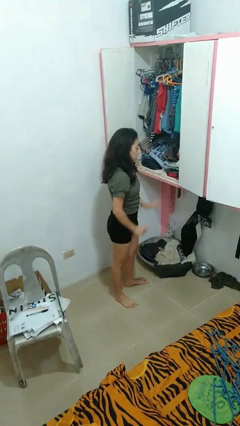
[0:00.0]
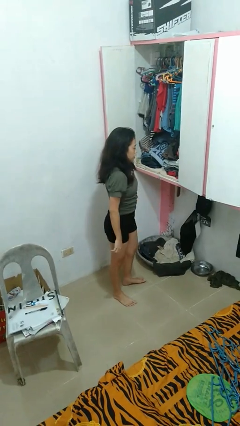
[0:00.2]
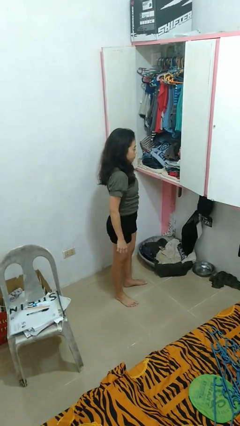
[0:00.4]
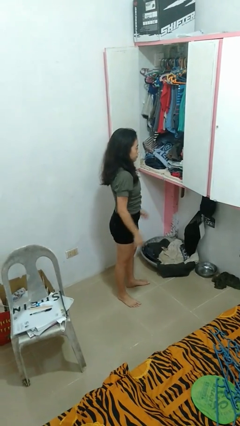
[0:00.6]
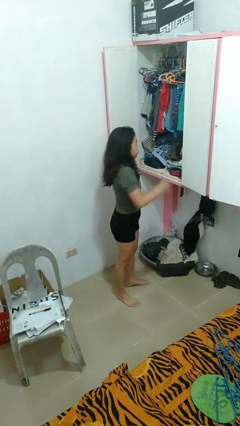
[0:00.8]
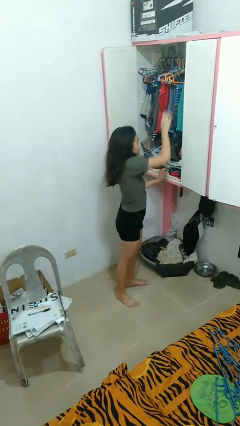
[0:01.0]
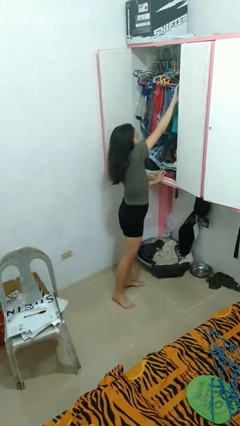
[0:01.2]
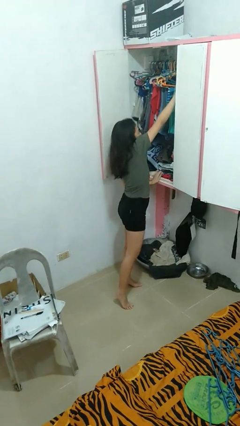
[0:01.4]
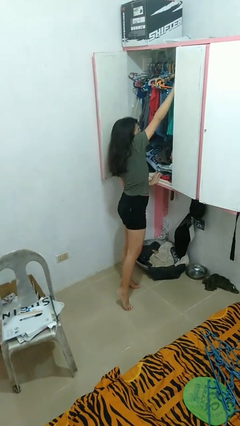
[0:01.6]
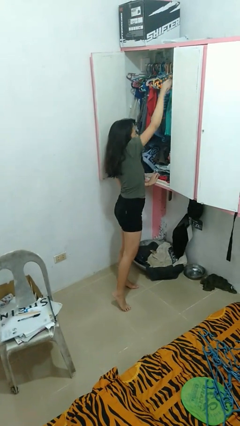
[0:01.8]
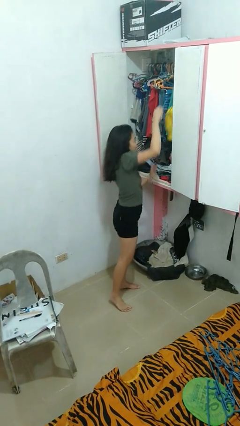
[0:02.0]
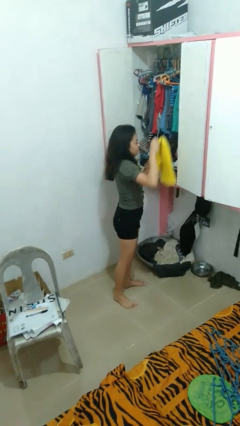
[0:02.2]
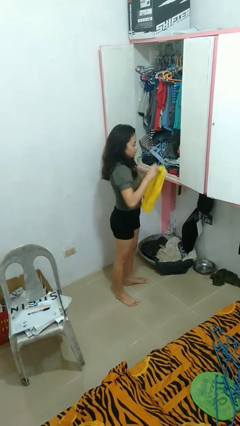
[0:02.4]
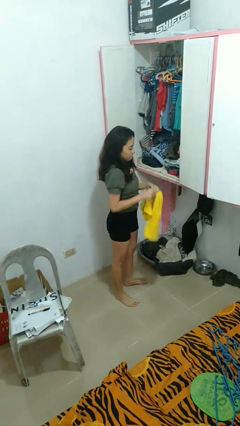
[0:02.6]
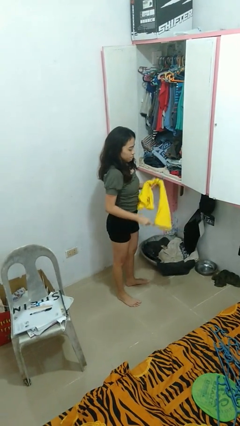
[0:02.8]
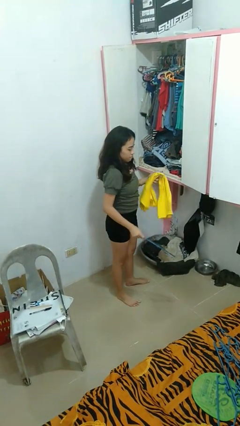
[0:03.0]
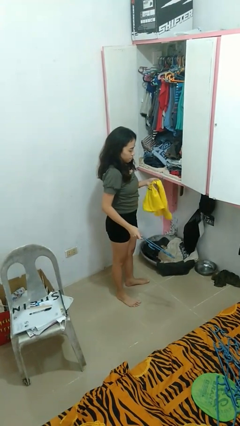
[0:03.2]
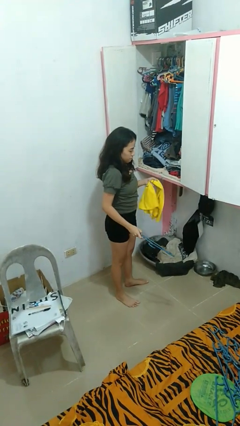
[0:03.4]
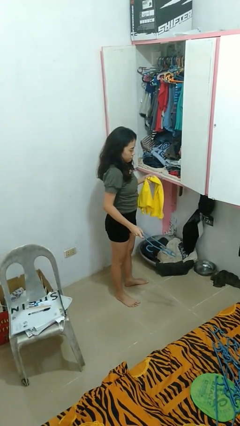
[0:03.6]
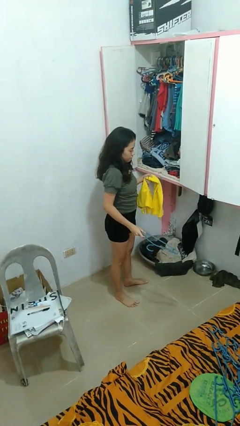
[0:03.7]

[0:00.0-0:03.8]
person takes clothes from closet

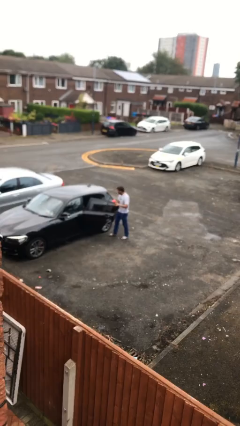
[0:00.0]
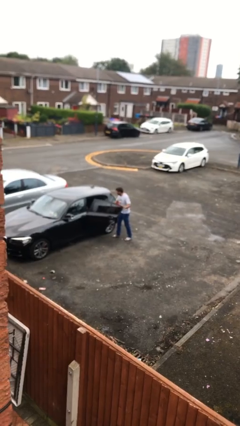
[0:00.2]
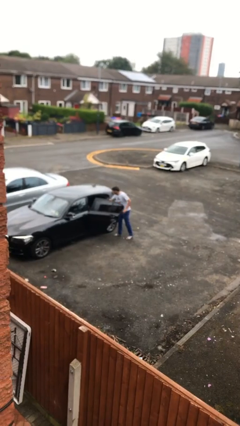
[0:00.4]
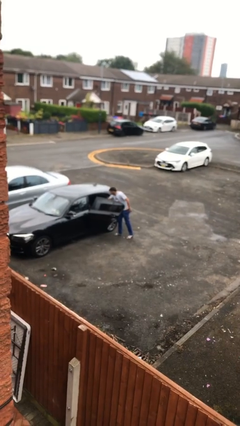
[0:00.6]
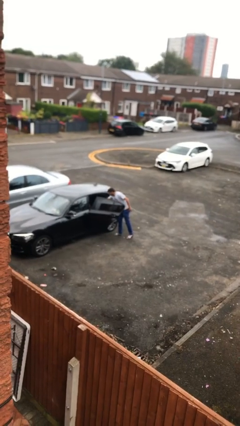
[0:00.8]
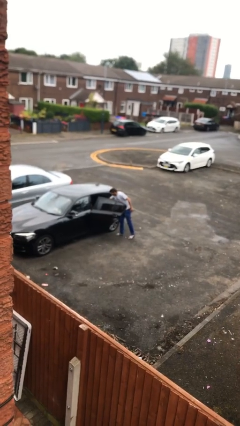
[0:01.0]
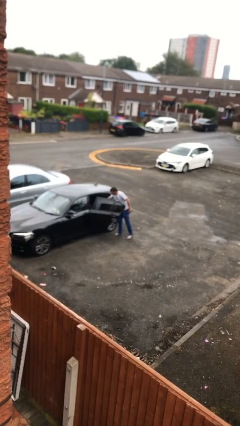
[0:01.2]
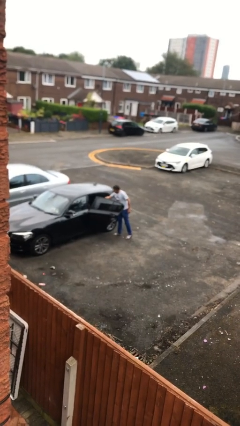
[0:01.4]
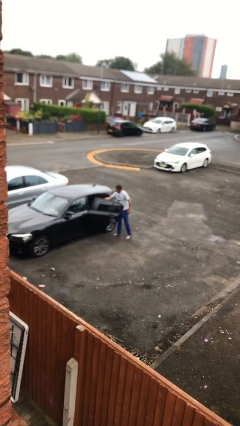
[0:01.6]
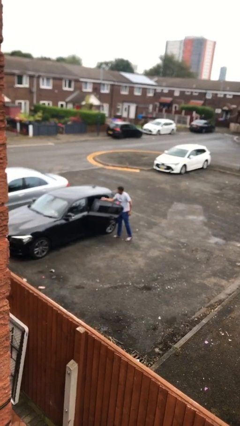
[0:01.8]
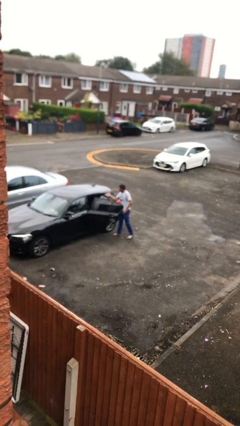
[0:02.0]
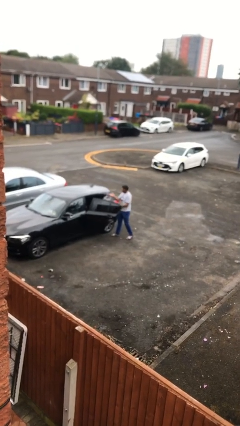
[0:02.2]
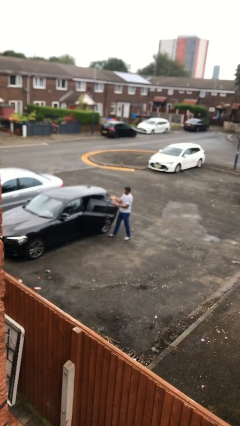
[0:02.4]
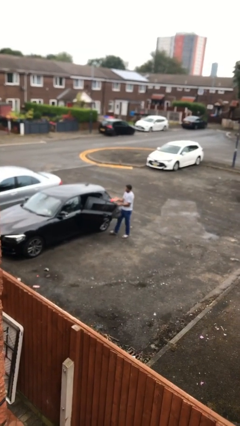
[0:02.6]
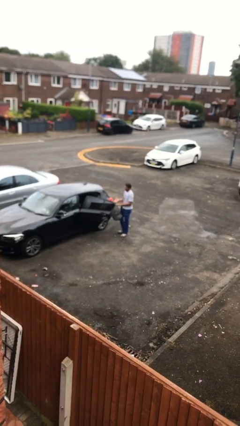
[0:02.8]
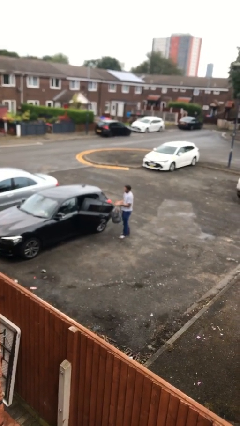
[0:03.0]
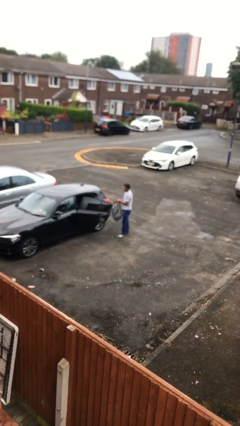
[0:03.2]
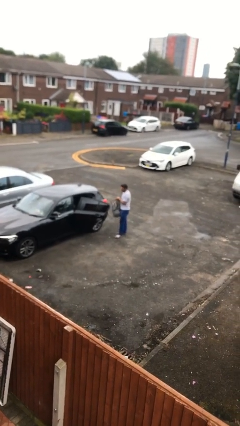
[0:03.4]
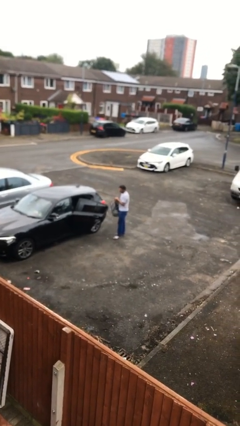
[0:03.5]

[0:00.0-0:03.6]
person unloads car

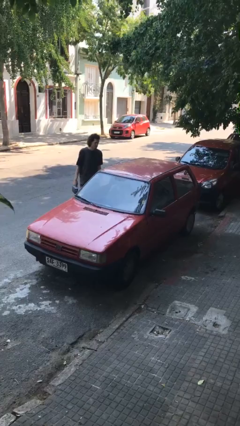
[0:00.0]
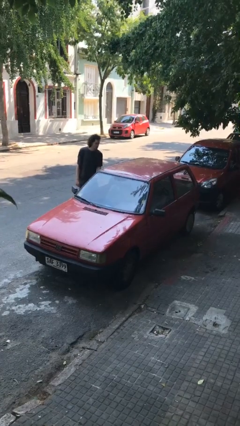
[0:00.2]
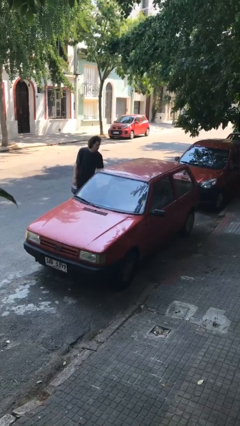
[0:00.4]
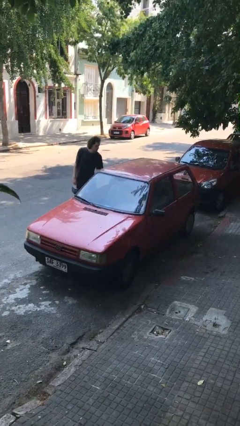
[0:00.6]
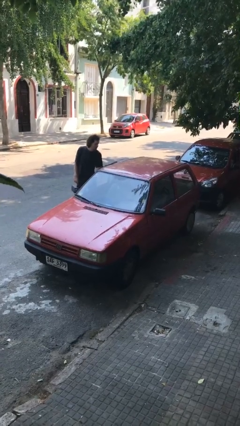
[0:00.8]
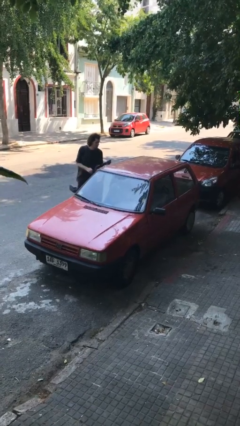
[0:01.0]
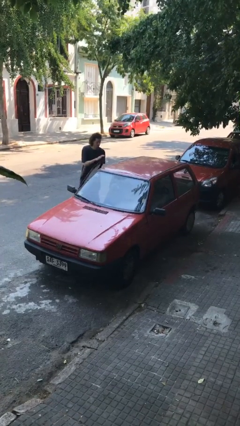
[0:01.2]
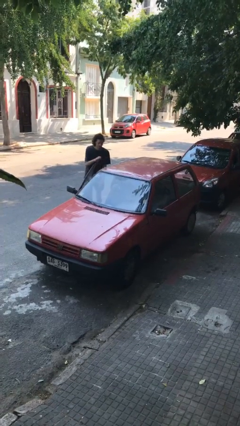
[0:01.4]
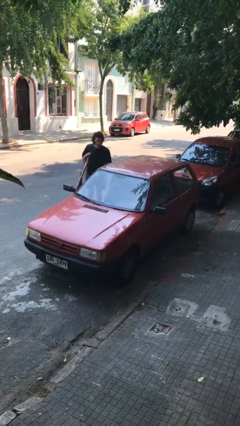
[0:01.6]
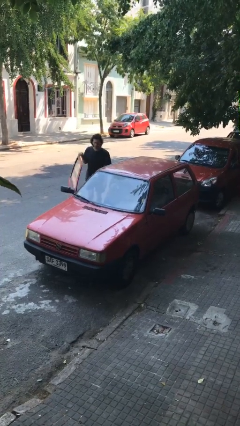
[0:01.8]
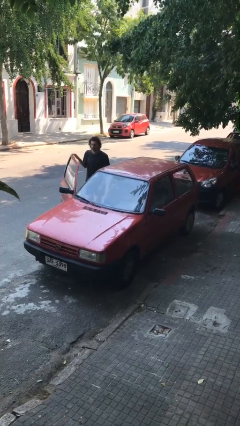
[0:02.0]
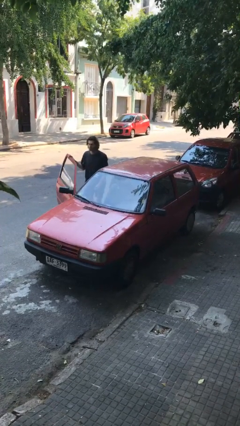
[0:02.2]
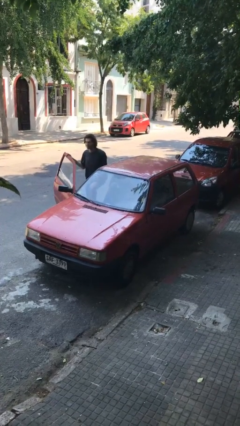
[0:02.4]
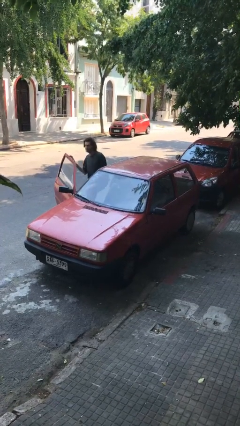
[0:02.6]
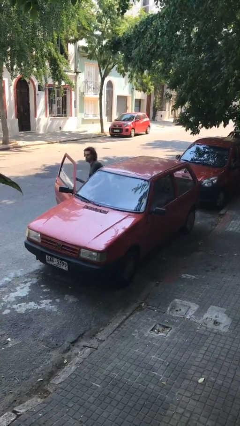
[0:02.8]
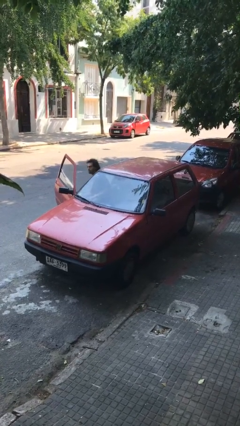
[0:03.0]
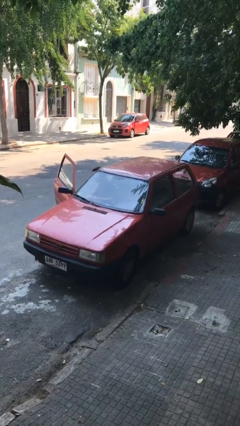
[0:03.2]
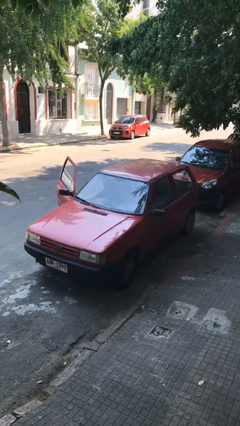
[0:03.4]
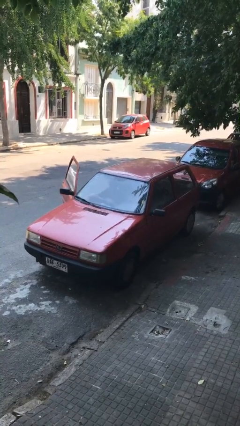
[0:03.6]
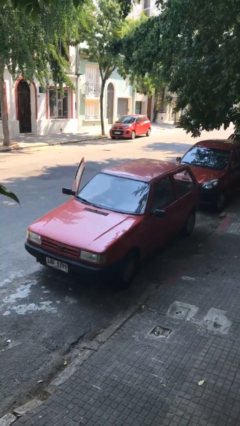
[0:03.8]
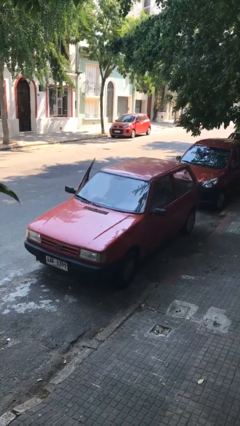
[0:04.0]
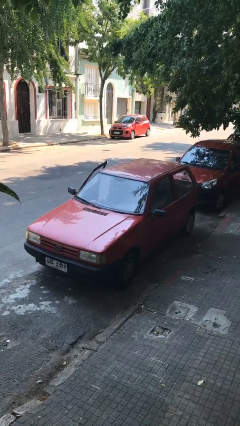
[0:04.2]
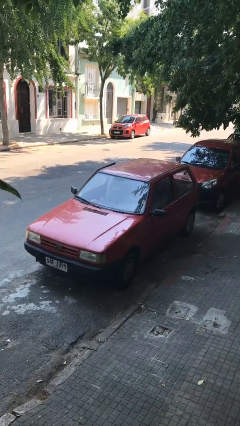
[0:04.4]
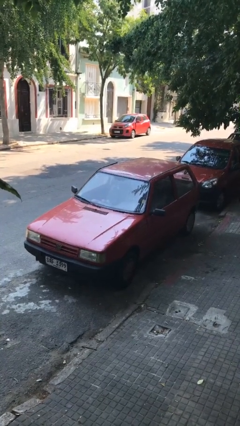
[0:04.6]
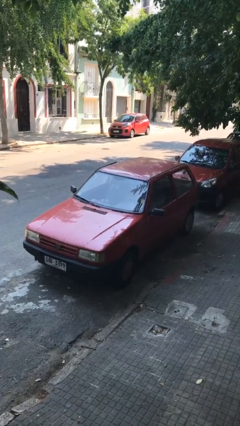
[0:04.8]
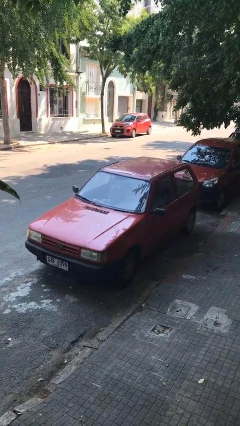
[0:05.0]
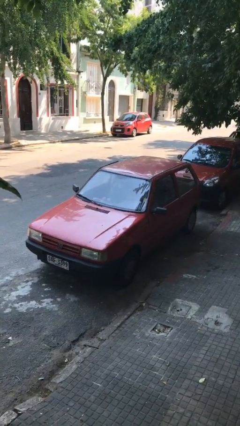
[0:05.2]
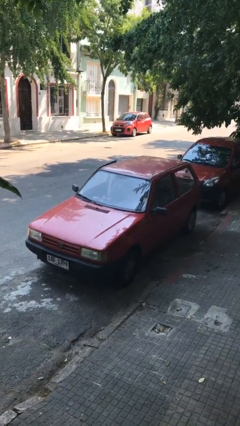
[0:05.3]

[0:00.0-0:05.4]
car picks up person

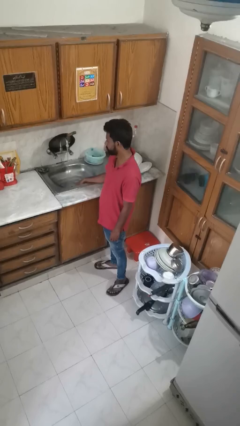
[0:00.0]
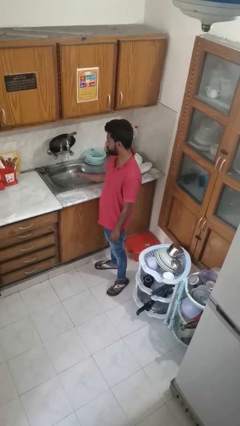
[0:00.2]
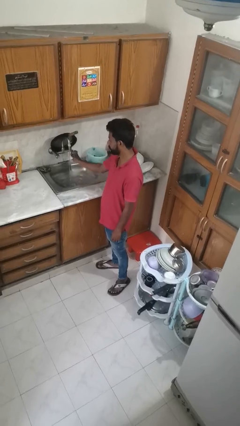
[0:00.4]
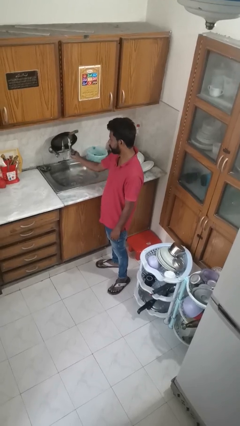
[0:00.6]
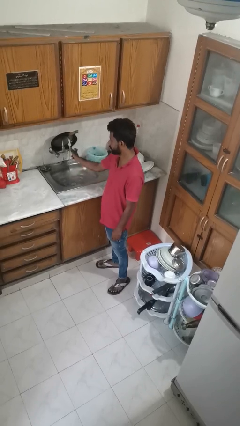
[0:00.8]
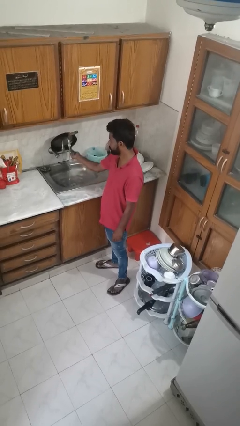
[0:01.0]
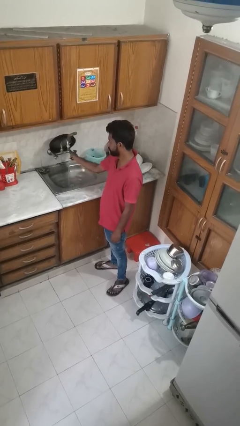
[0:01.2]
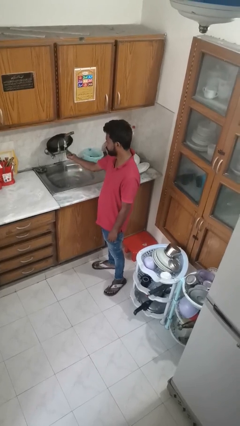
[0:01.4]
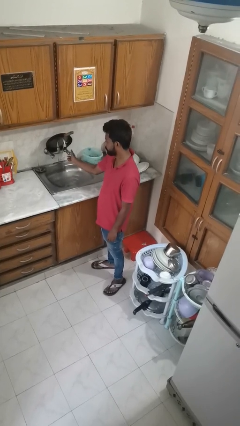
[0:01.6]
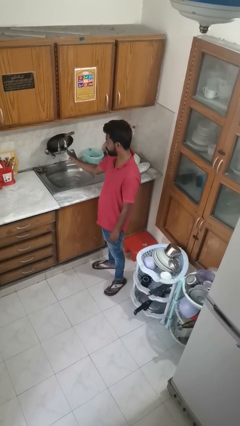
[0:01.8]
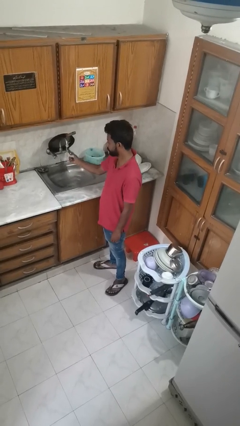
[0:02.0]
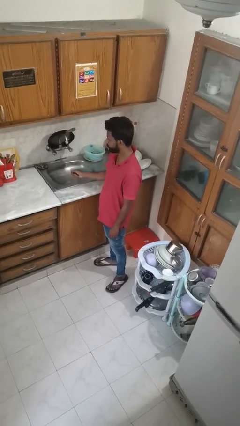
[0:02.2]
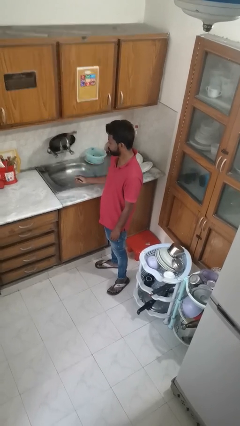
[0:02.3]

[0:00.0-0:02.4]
person turns off faucet

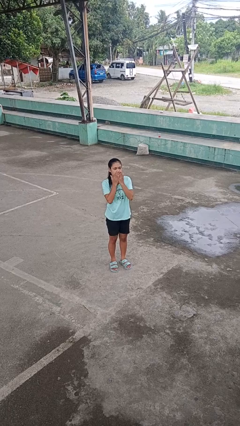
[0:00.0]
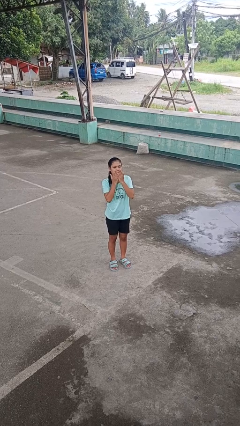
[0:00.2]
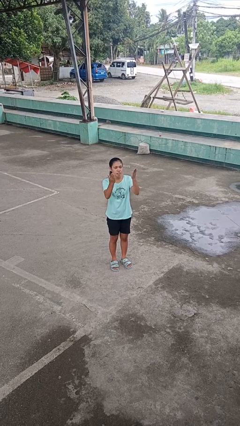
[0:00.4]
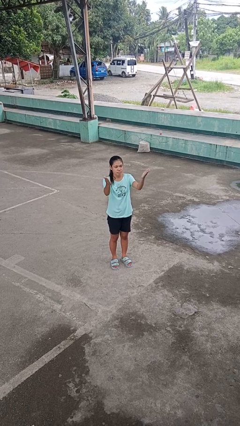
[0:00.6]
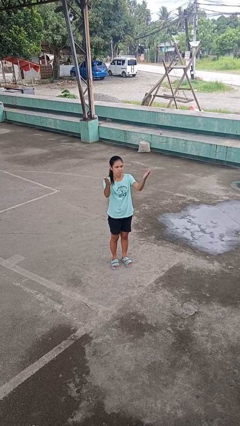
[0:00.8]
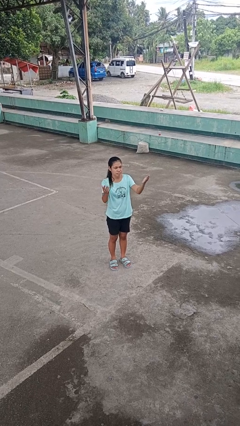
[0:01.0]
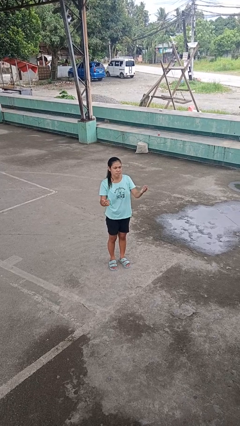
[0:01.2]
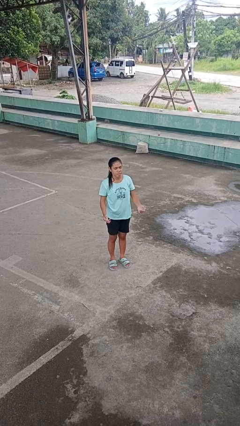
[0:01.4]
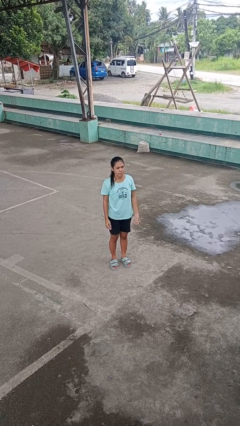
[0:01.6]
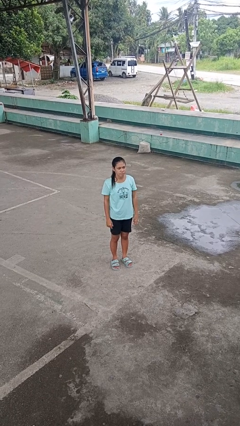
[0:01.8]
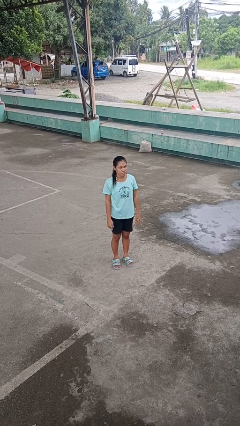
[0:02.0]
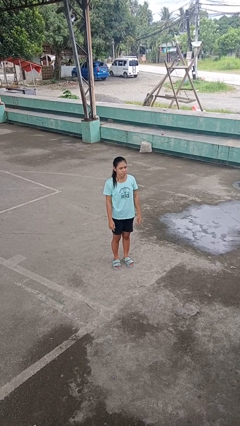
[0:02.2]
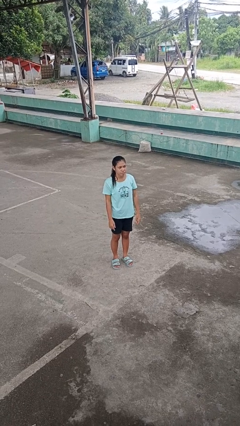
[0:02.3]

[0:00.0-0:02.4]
person gestures blow kiss
